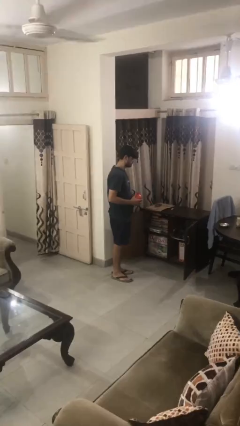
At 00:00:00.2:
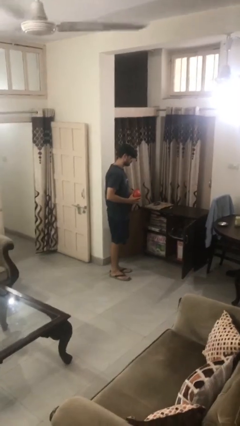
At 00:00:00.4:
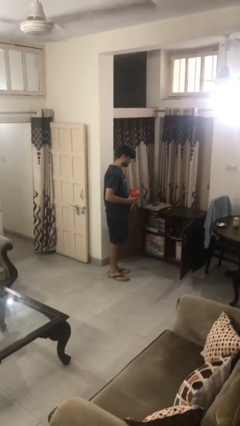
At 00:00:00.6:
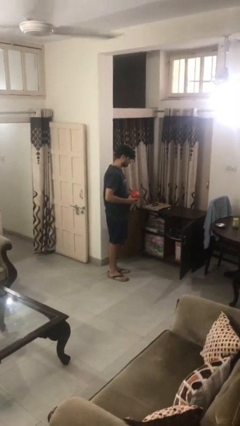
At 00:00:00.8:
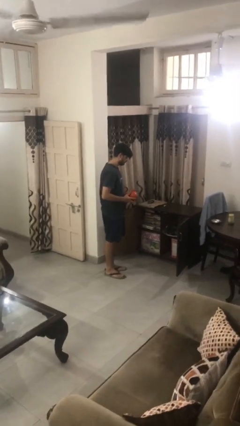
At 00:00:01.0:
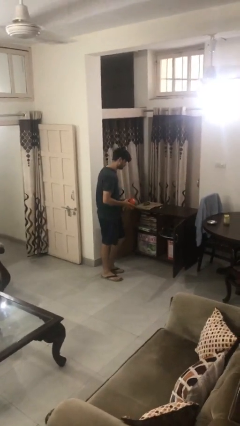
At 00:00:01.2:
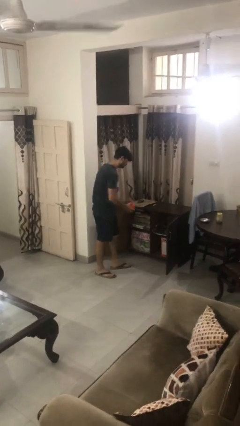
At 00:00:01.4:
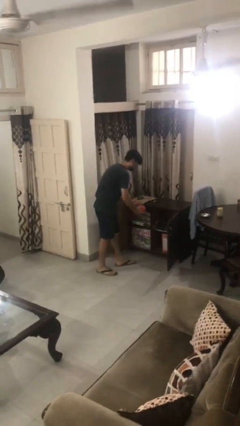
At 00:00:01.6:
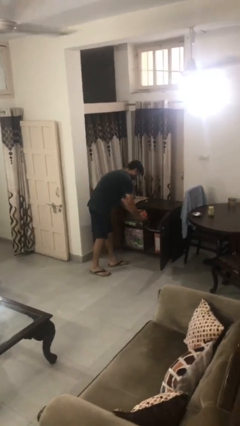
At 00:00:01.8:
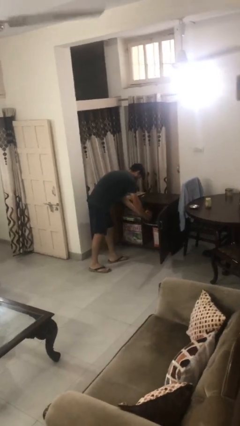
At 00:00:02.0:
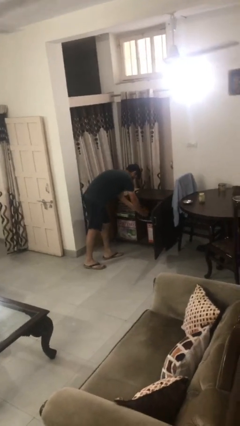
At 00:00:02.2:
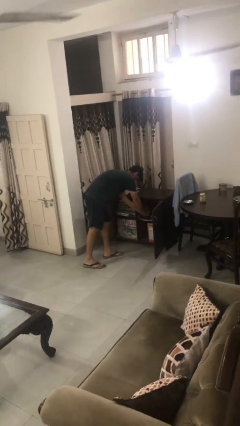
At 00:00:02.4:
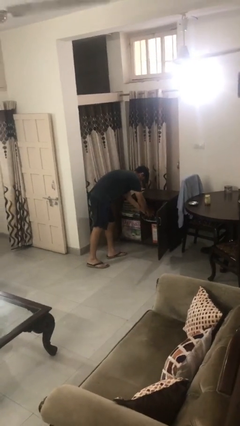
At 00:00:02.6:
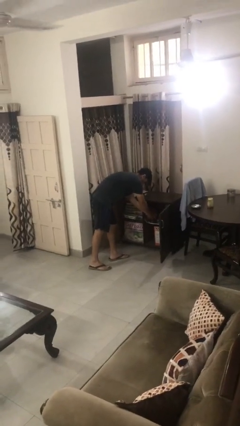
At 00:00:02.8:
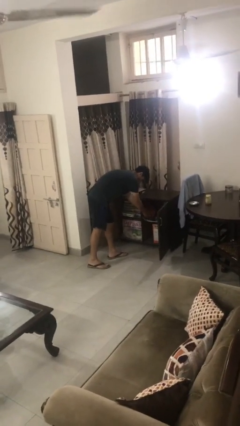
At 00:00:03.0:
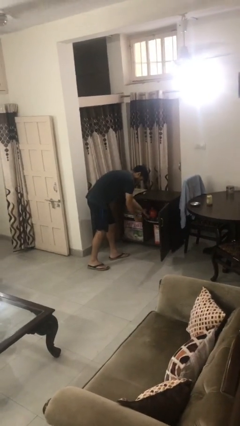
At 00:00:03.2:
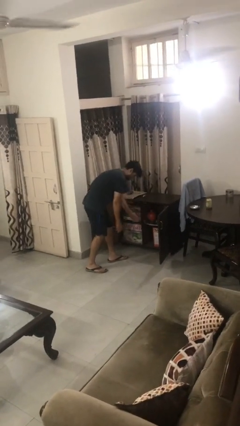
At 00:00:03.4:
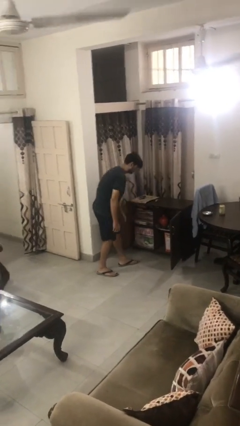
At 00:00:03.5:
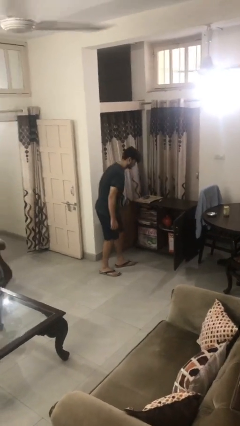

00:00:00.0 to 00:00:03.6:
person puts down object into cabinet

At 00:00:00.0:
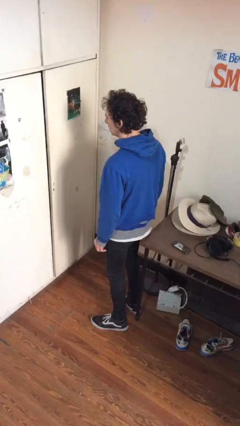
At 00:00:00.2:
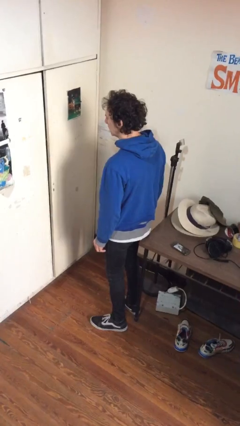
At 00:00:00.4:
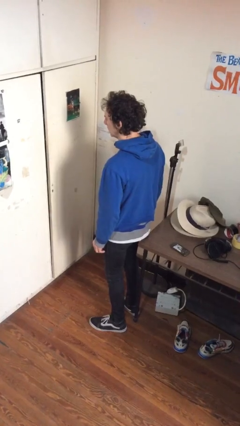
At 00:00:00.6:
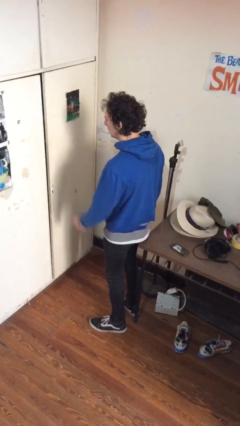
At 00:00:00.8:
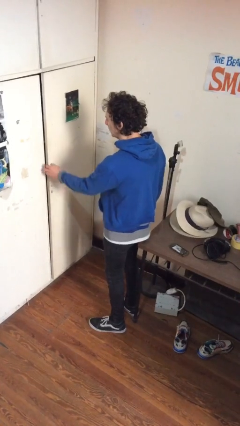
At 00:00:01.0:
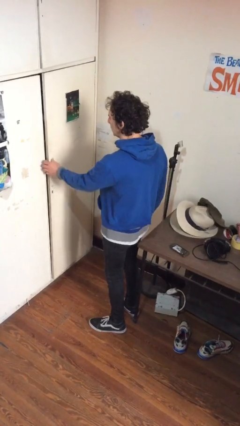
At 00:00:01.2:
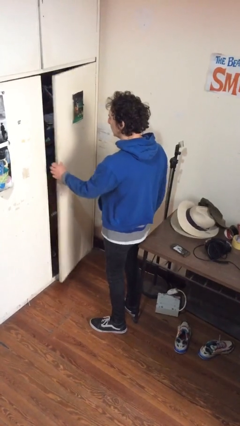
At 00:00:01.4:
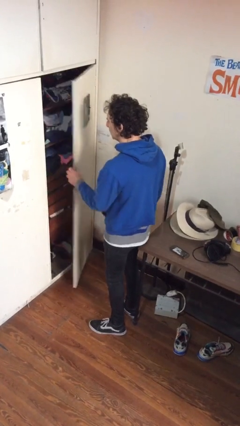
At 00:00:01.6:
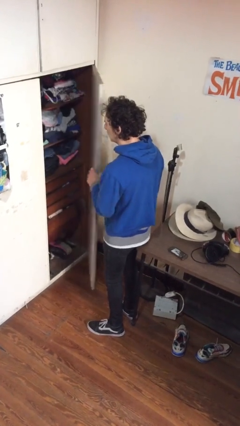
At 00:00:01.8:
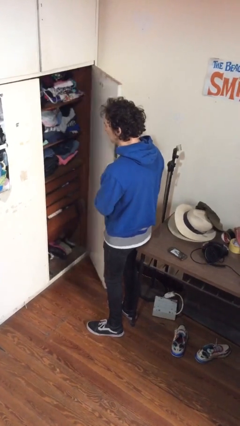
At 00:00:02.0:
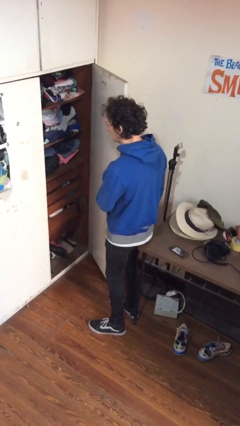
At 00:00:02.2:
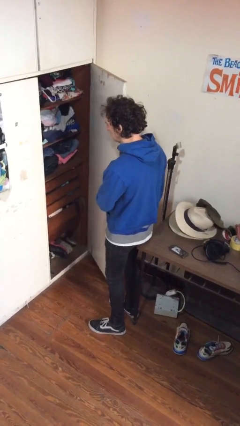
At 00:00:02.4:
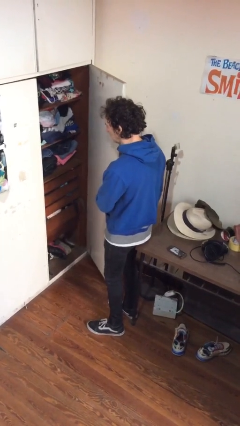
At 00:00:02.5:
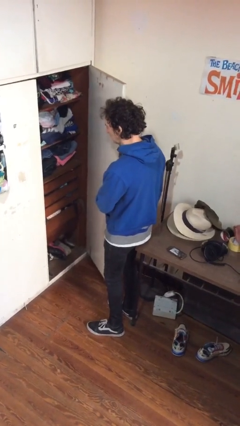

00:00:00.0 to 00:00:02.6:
person opens closet door

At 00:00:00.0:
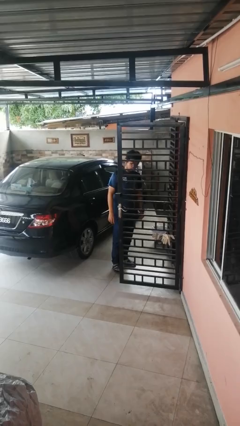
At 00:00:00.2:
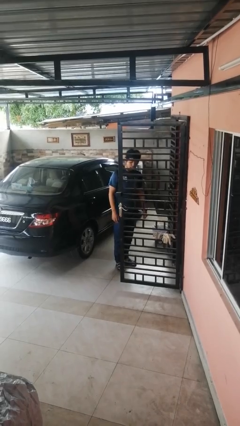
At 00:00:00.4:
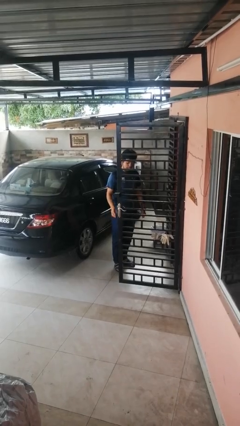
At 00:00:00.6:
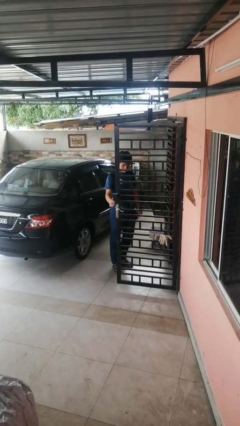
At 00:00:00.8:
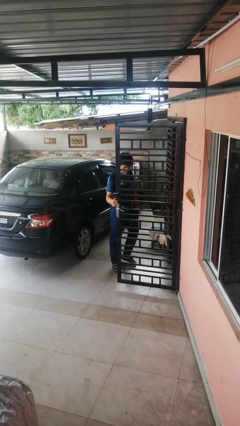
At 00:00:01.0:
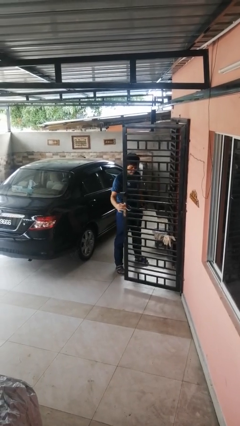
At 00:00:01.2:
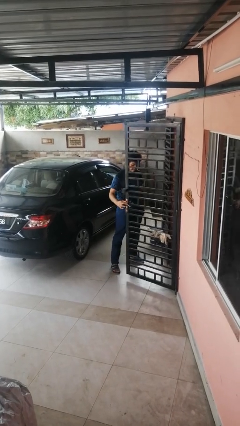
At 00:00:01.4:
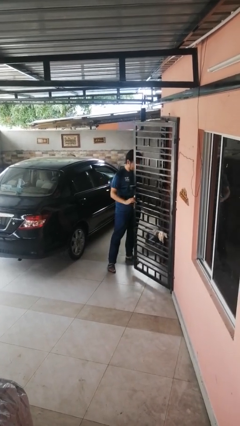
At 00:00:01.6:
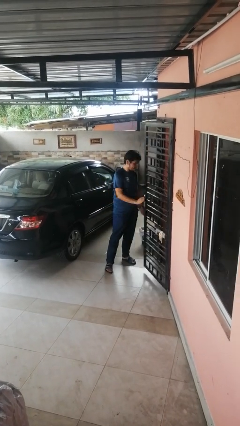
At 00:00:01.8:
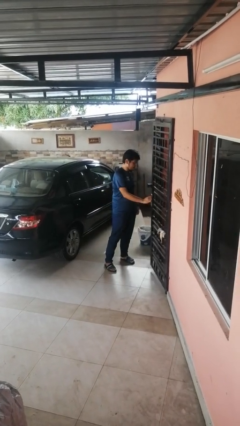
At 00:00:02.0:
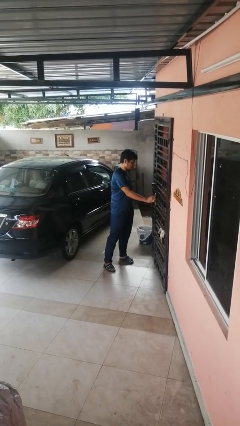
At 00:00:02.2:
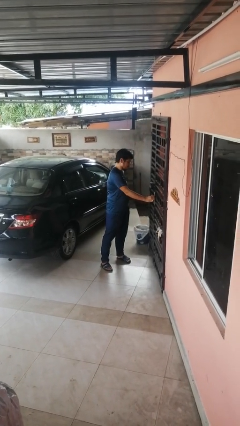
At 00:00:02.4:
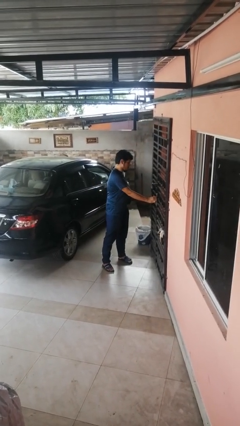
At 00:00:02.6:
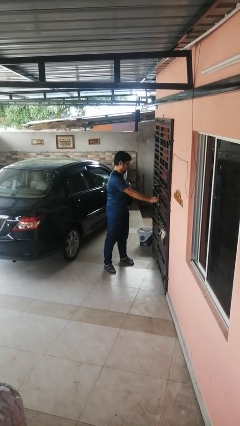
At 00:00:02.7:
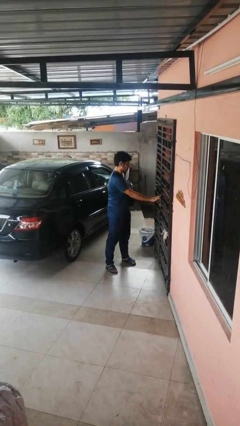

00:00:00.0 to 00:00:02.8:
person closes gate

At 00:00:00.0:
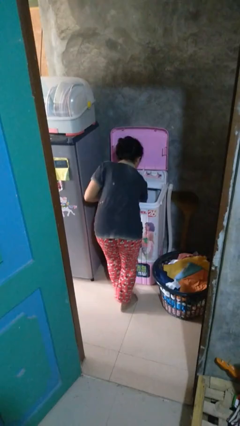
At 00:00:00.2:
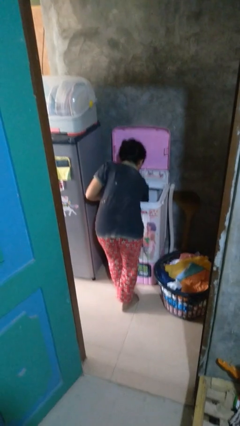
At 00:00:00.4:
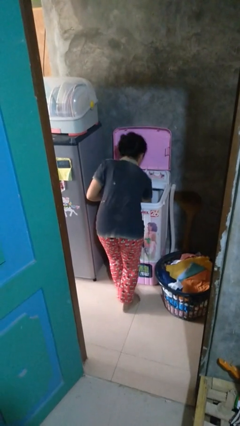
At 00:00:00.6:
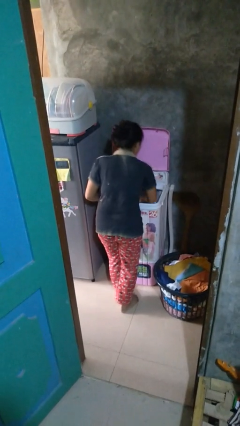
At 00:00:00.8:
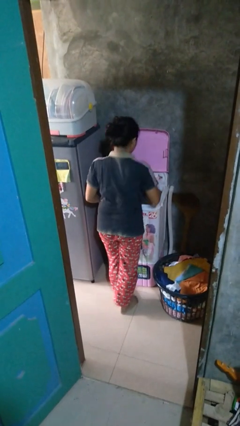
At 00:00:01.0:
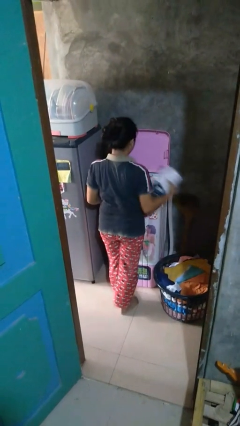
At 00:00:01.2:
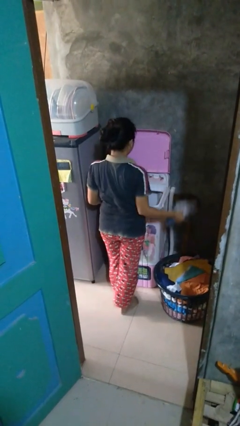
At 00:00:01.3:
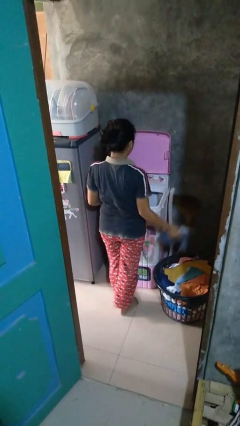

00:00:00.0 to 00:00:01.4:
person unloads clotheswasher

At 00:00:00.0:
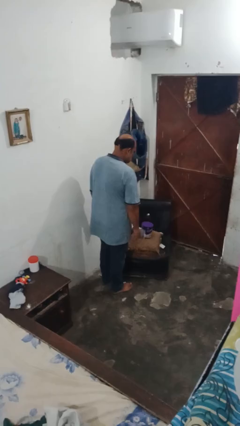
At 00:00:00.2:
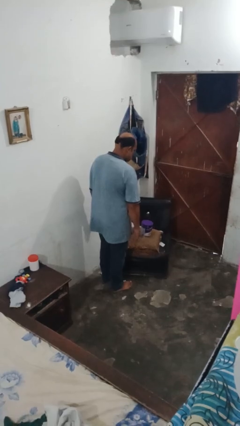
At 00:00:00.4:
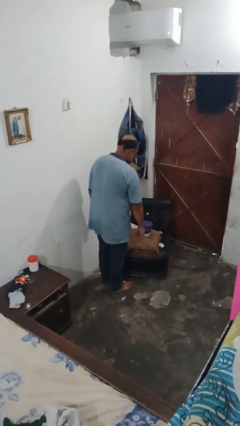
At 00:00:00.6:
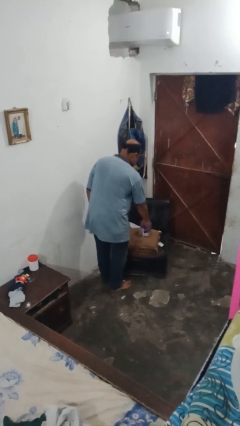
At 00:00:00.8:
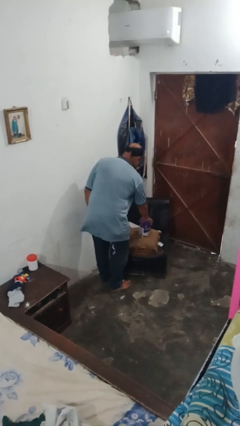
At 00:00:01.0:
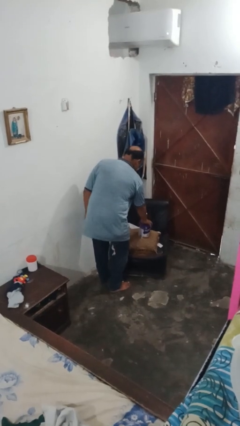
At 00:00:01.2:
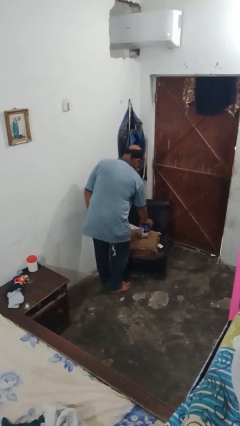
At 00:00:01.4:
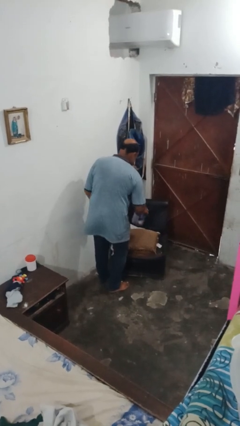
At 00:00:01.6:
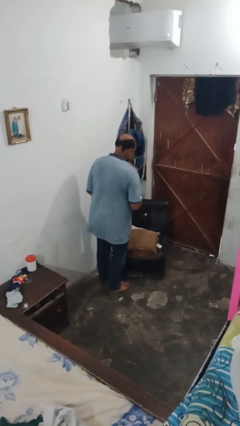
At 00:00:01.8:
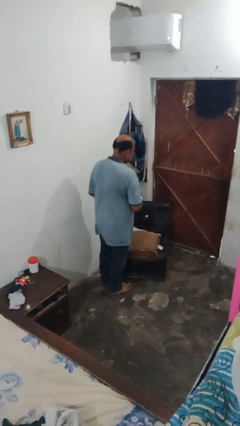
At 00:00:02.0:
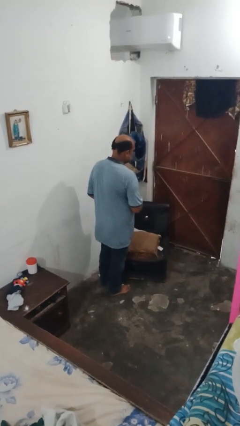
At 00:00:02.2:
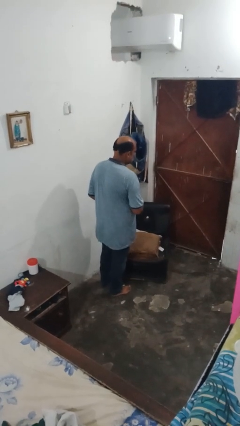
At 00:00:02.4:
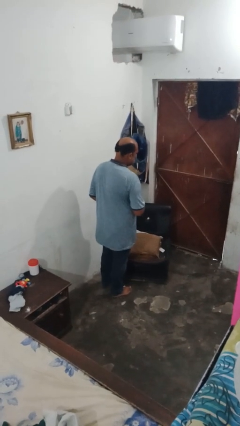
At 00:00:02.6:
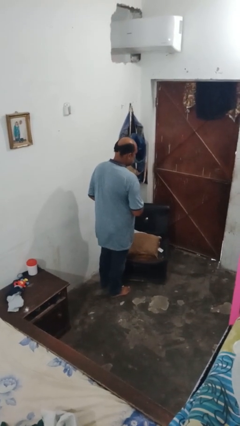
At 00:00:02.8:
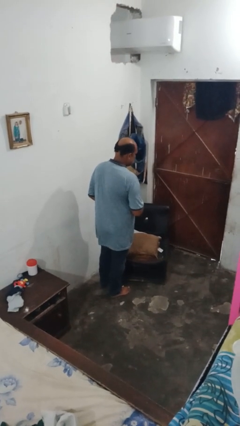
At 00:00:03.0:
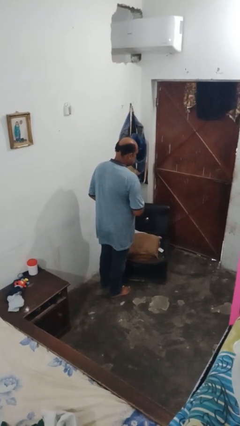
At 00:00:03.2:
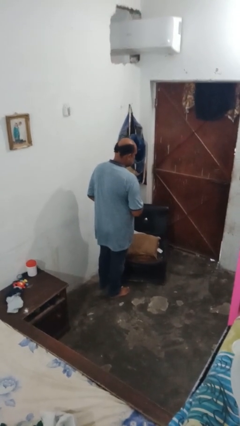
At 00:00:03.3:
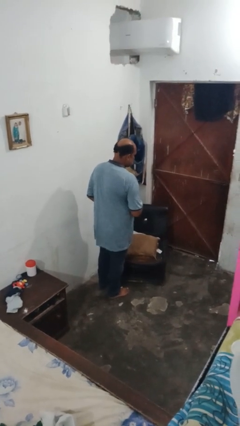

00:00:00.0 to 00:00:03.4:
person picks up object from couch

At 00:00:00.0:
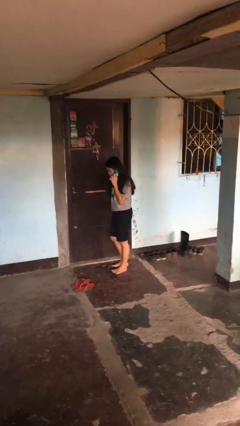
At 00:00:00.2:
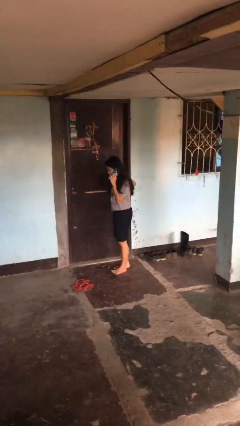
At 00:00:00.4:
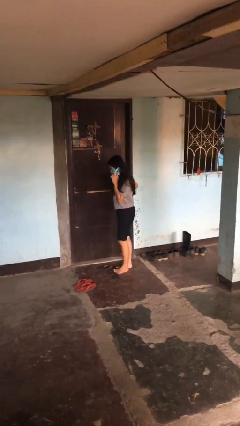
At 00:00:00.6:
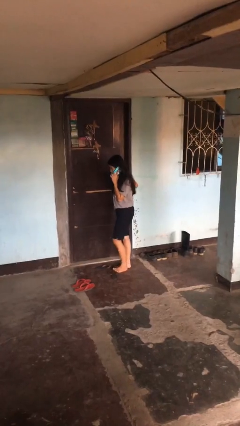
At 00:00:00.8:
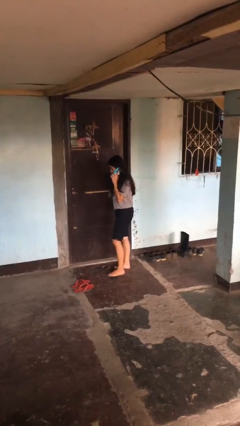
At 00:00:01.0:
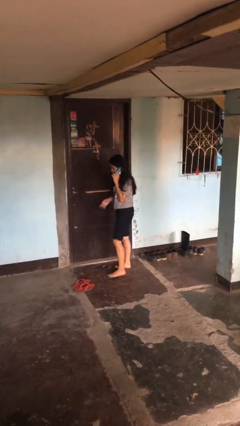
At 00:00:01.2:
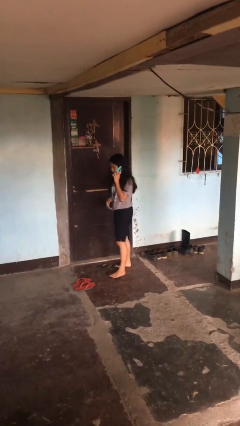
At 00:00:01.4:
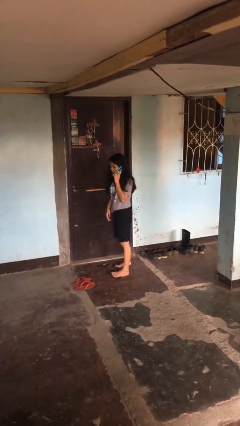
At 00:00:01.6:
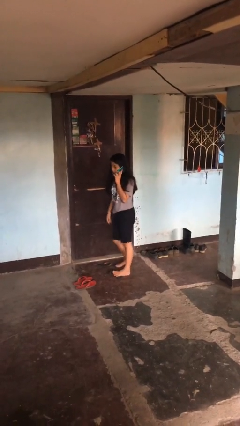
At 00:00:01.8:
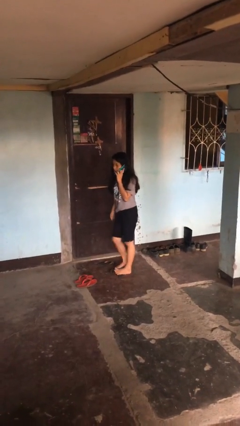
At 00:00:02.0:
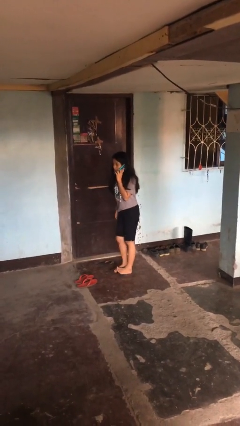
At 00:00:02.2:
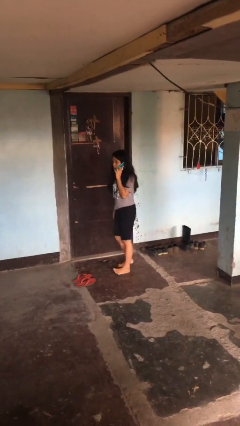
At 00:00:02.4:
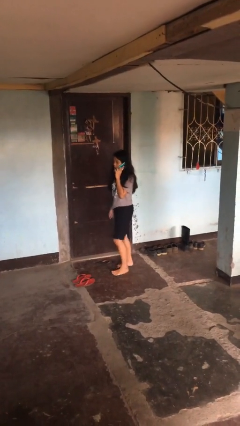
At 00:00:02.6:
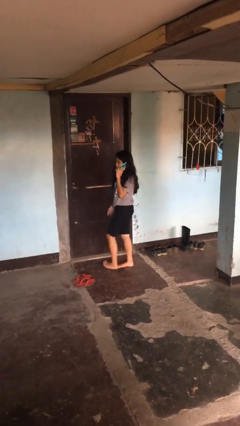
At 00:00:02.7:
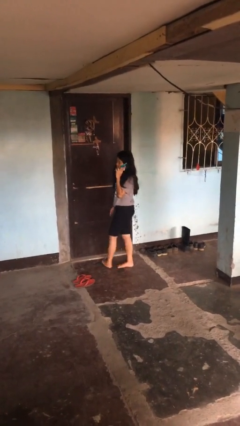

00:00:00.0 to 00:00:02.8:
person closes facility door

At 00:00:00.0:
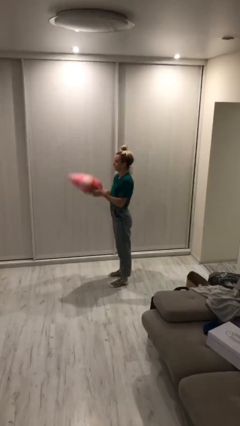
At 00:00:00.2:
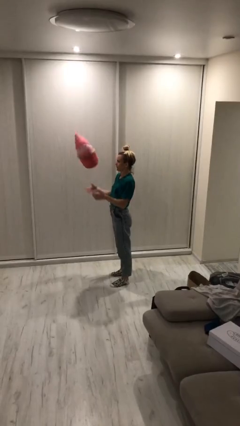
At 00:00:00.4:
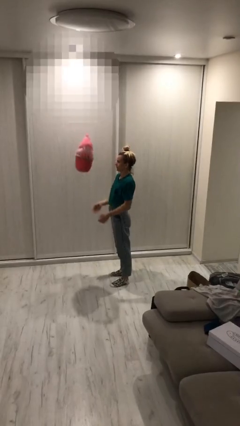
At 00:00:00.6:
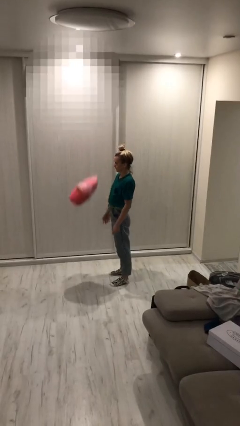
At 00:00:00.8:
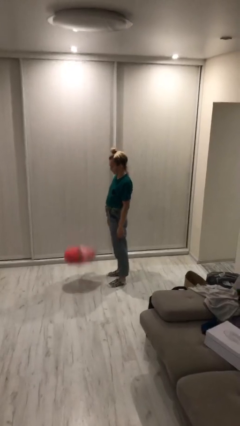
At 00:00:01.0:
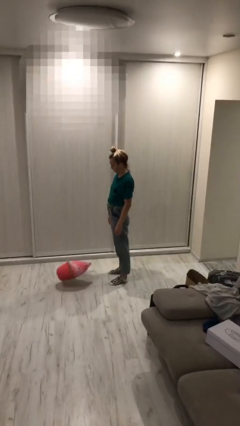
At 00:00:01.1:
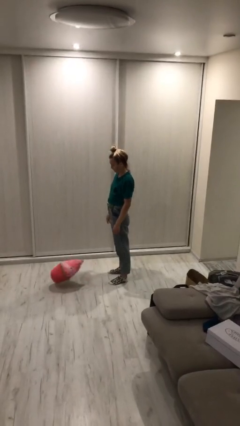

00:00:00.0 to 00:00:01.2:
person throws object into air
